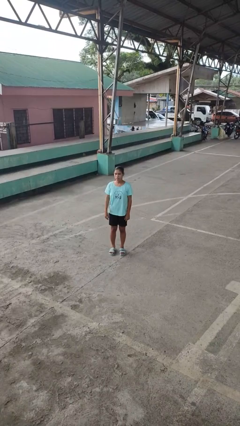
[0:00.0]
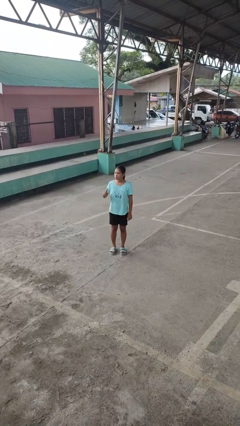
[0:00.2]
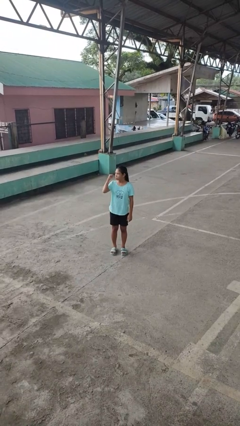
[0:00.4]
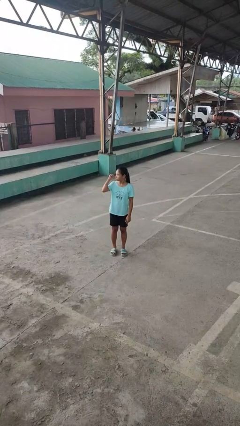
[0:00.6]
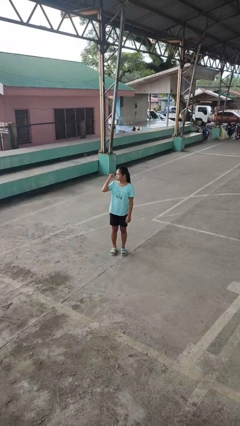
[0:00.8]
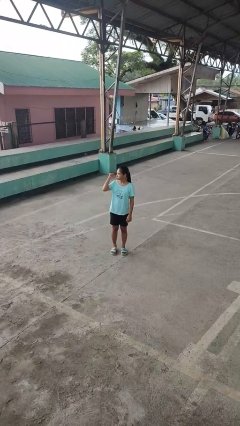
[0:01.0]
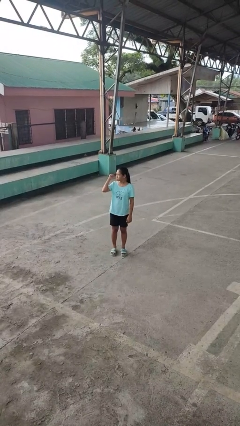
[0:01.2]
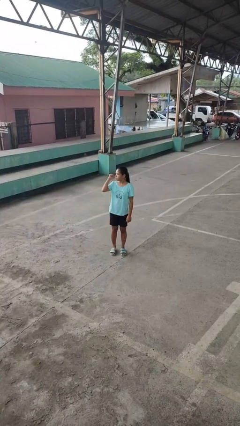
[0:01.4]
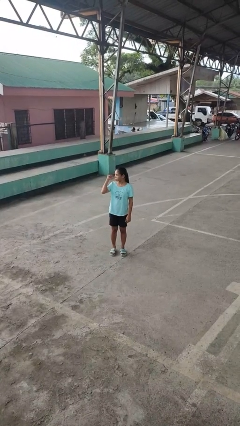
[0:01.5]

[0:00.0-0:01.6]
person gestures behind me

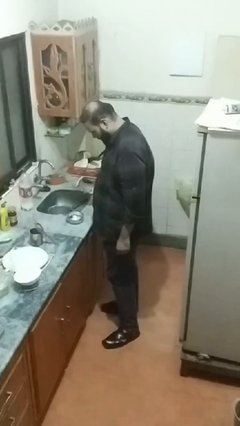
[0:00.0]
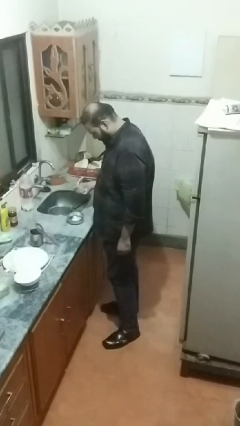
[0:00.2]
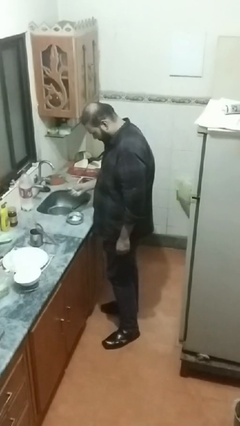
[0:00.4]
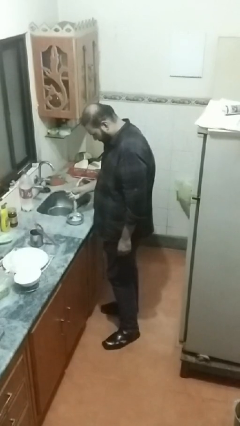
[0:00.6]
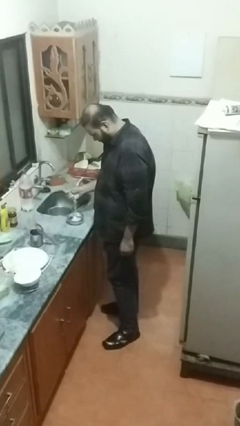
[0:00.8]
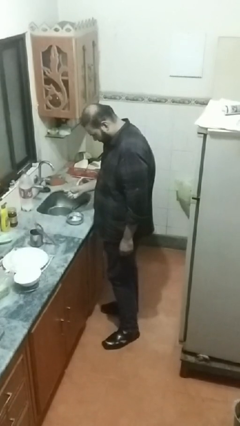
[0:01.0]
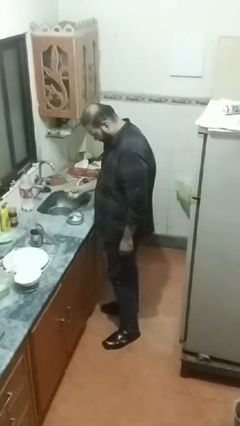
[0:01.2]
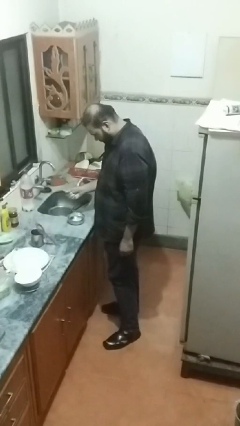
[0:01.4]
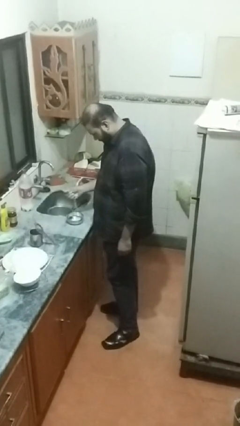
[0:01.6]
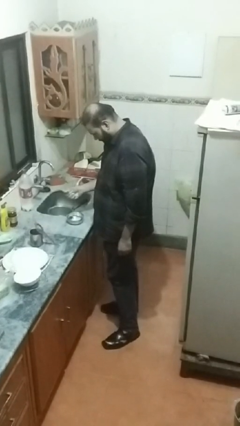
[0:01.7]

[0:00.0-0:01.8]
person pours into bowl

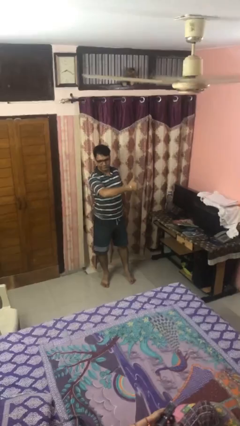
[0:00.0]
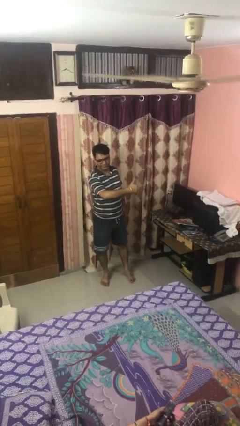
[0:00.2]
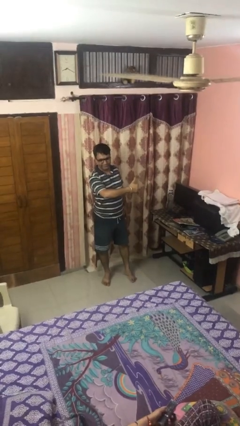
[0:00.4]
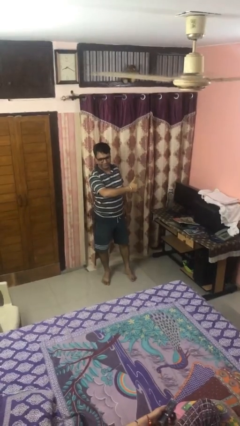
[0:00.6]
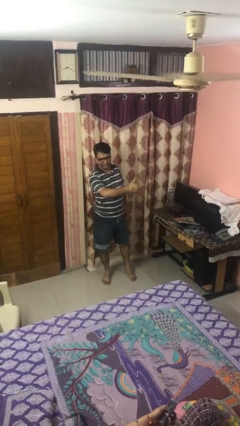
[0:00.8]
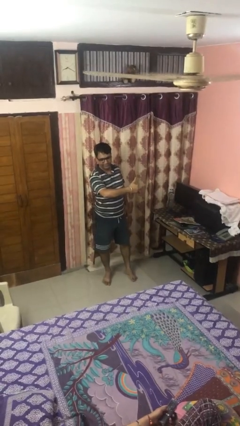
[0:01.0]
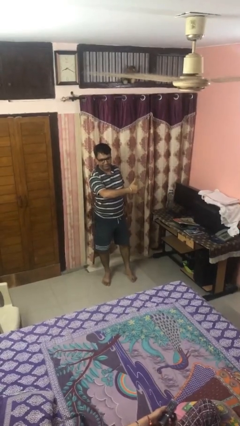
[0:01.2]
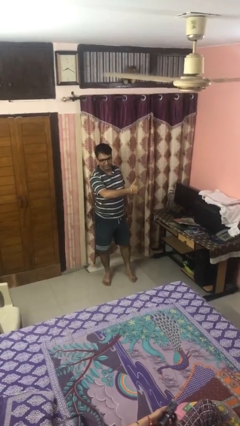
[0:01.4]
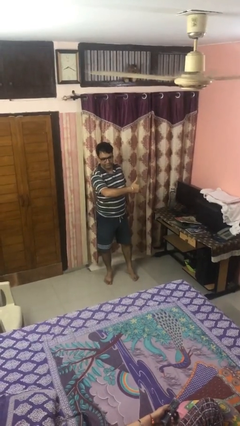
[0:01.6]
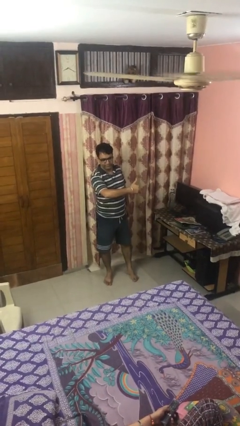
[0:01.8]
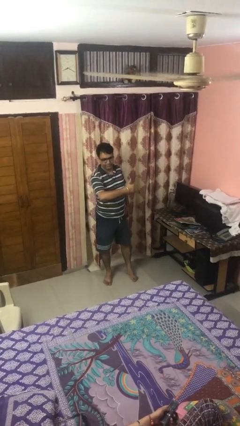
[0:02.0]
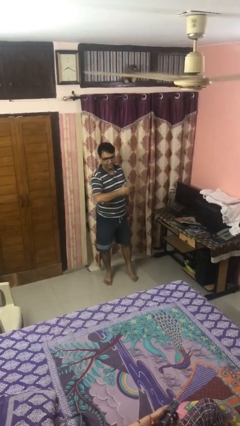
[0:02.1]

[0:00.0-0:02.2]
person gestures thumbs up

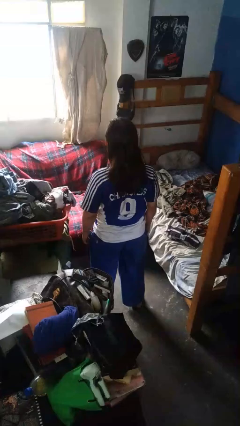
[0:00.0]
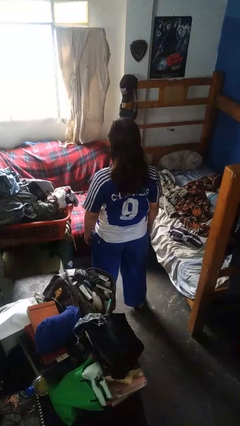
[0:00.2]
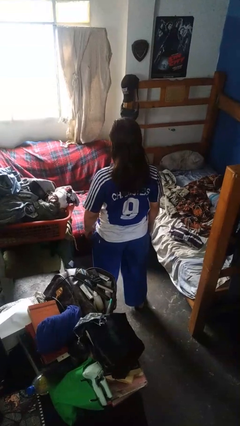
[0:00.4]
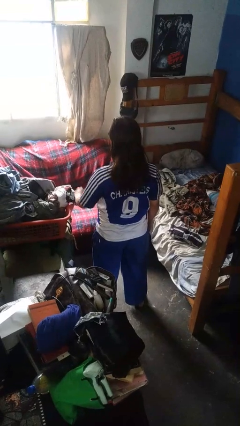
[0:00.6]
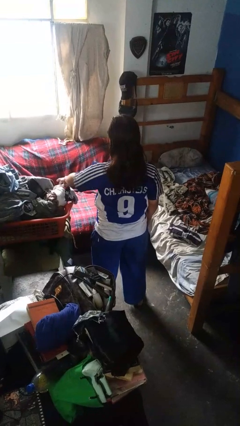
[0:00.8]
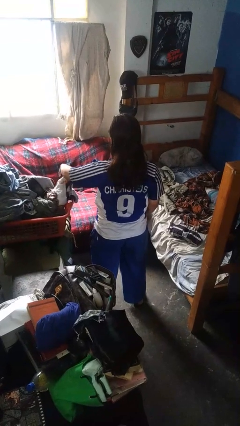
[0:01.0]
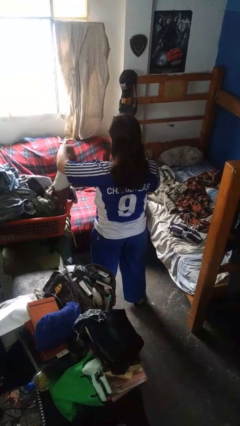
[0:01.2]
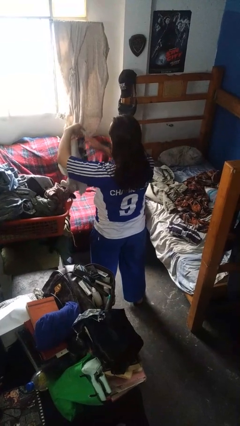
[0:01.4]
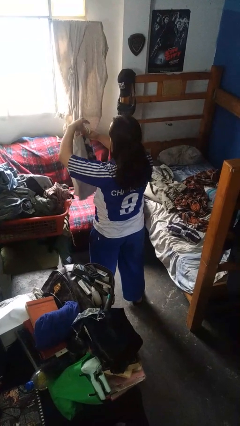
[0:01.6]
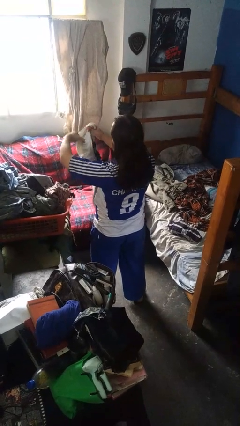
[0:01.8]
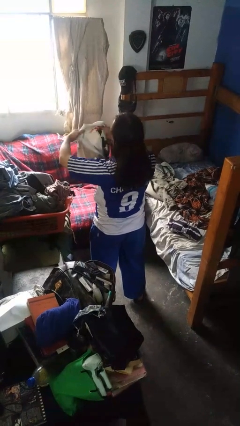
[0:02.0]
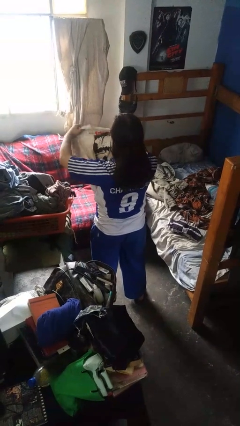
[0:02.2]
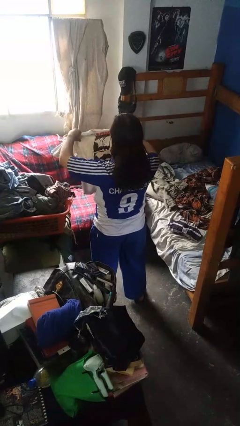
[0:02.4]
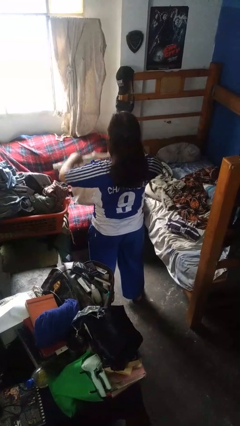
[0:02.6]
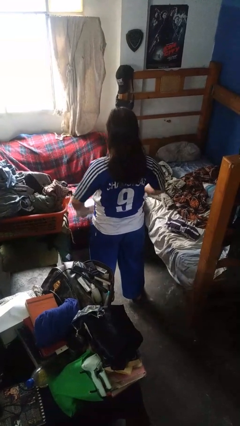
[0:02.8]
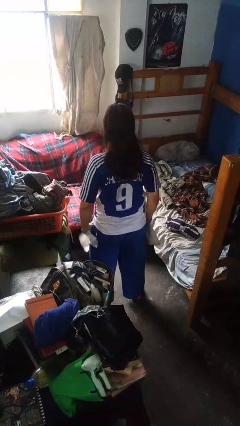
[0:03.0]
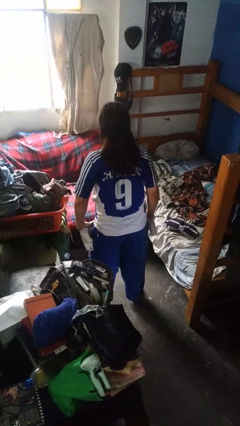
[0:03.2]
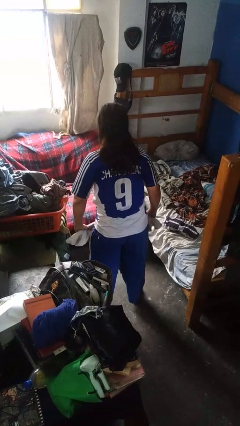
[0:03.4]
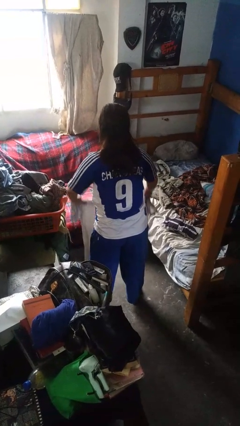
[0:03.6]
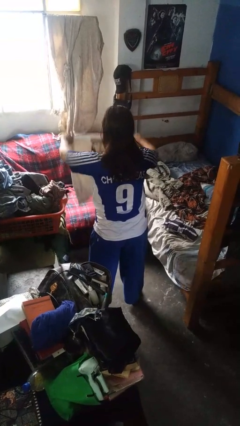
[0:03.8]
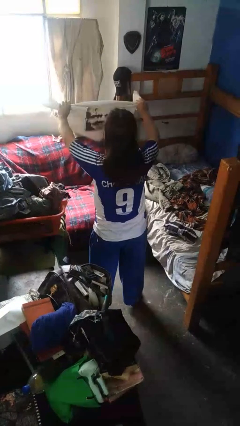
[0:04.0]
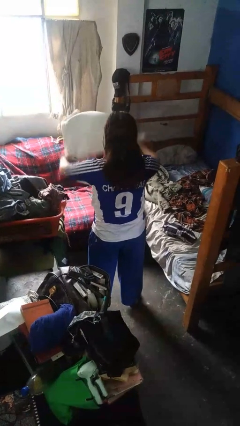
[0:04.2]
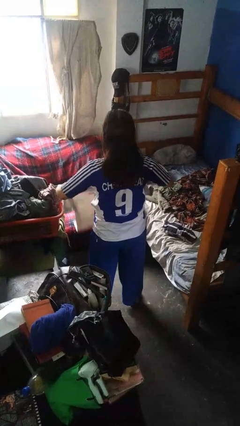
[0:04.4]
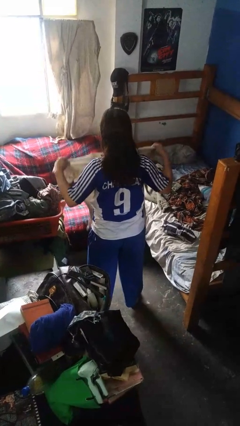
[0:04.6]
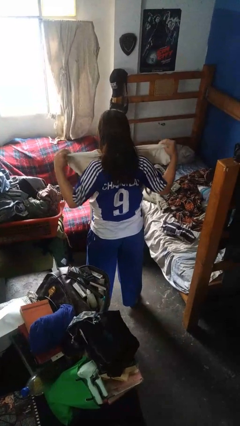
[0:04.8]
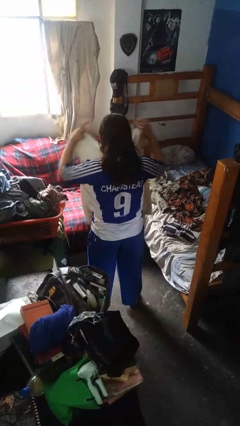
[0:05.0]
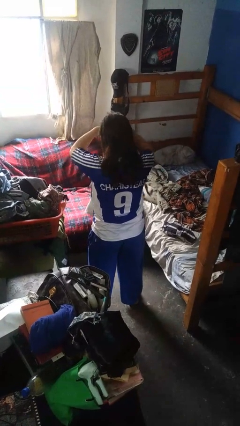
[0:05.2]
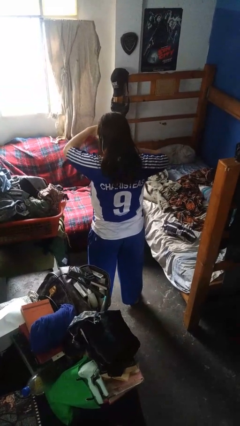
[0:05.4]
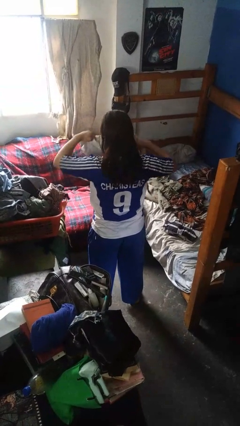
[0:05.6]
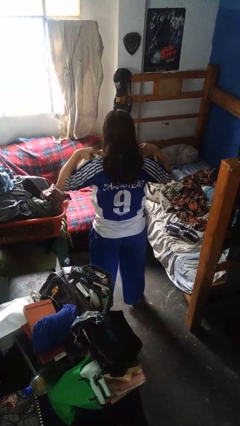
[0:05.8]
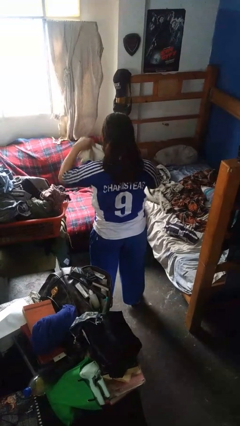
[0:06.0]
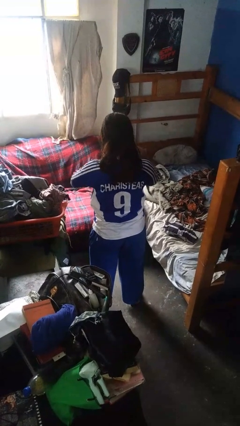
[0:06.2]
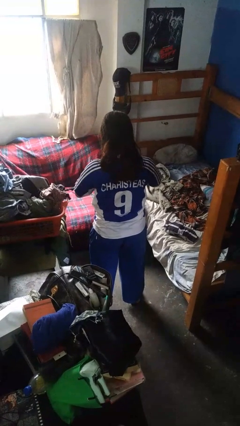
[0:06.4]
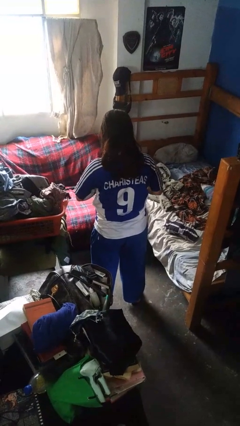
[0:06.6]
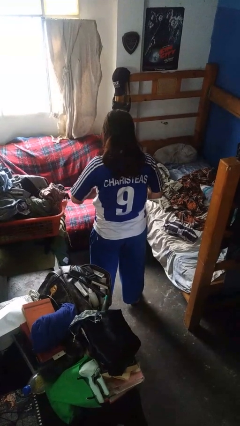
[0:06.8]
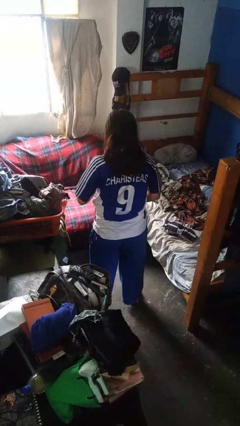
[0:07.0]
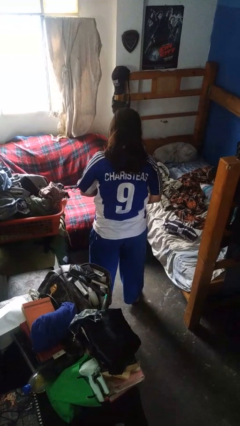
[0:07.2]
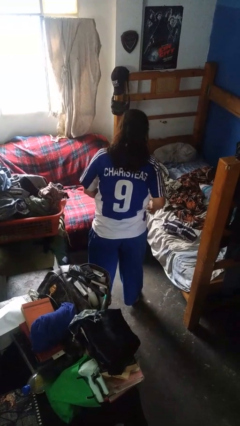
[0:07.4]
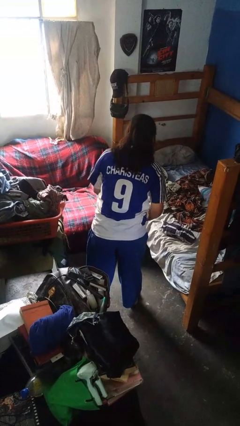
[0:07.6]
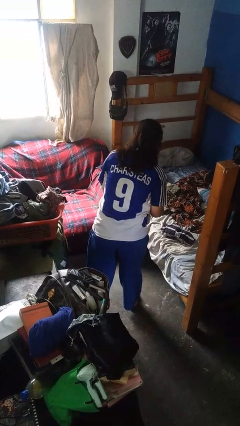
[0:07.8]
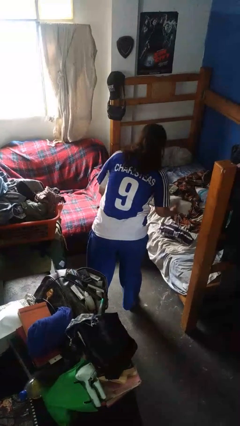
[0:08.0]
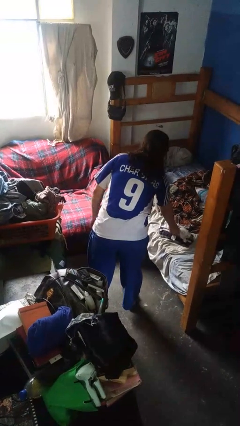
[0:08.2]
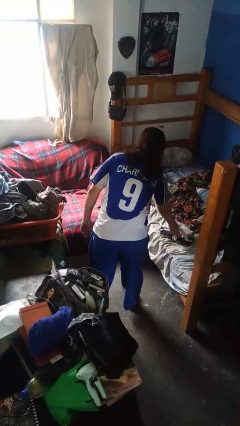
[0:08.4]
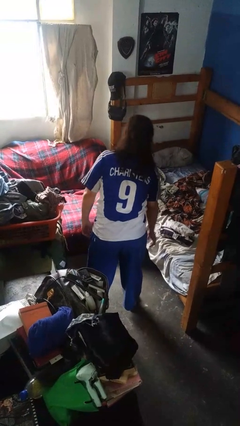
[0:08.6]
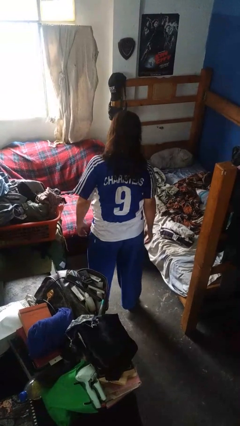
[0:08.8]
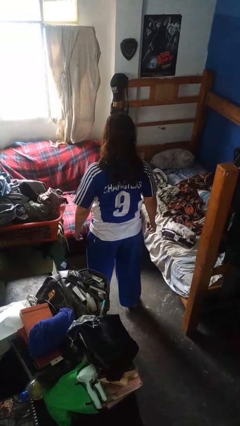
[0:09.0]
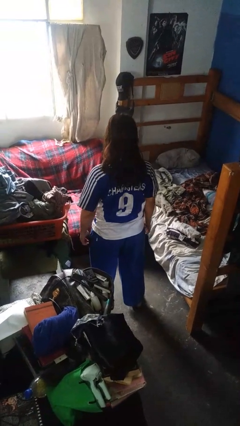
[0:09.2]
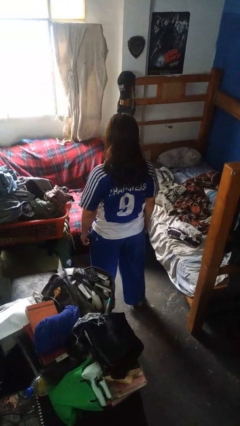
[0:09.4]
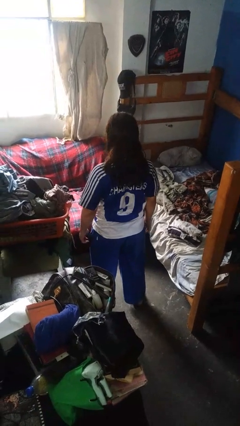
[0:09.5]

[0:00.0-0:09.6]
person folds shirt

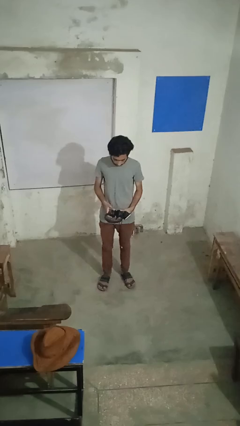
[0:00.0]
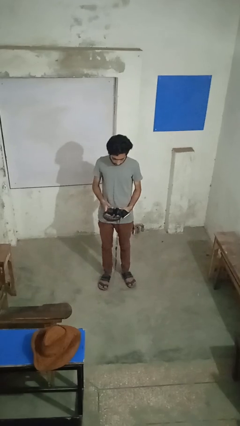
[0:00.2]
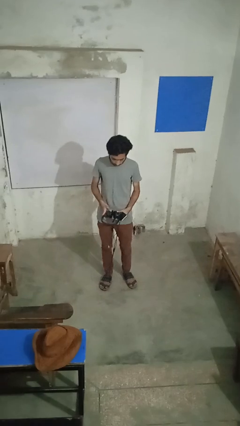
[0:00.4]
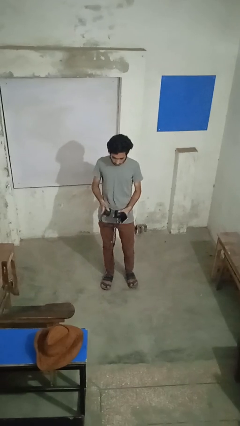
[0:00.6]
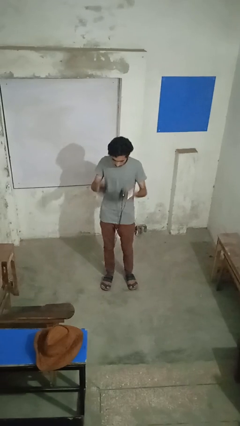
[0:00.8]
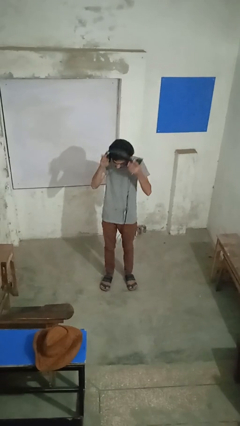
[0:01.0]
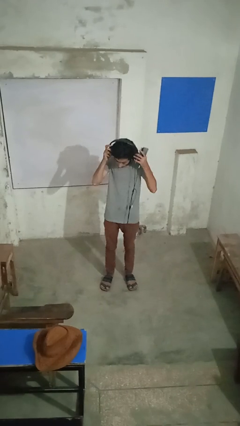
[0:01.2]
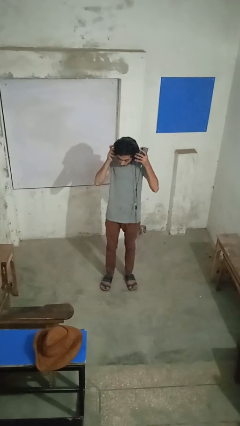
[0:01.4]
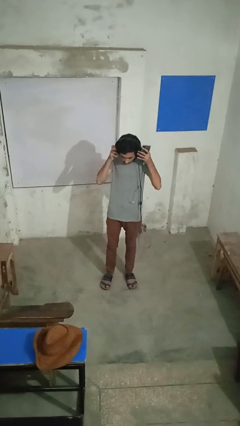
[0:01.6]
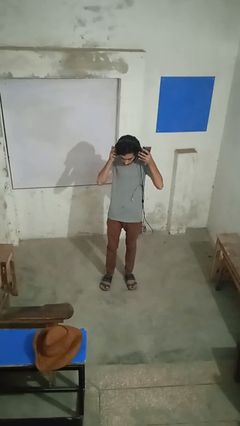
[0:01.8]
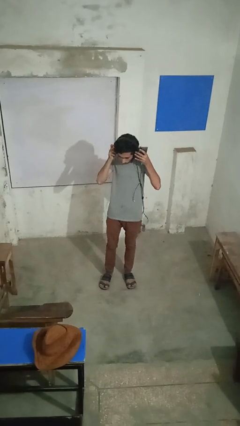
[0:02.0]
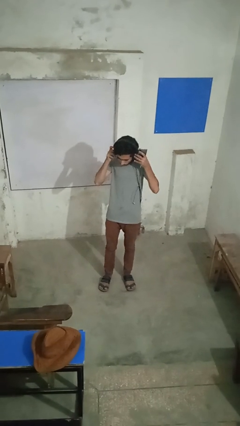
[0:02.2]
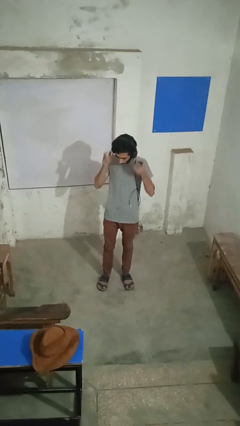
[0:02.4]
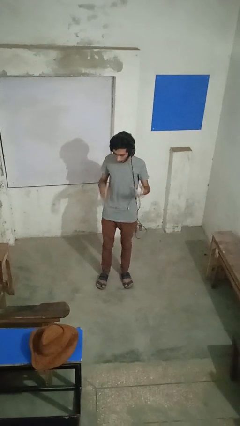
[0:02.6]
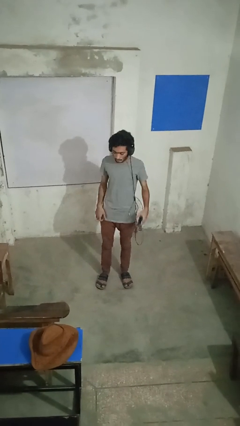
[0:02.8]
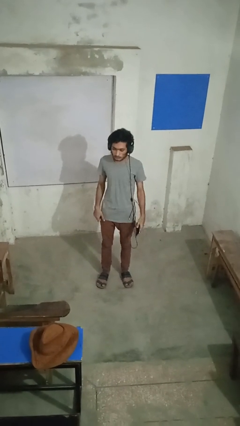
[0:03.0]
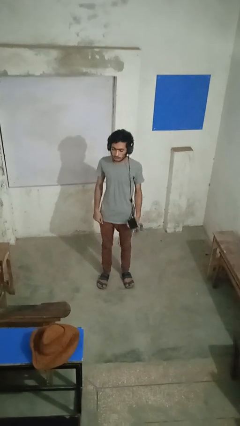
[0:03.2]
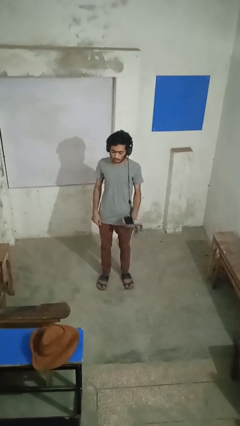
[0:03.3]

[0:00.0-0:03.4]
person puts on headphones
